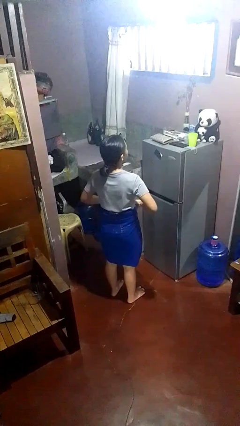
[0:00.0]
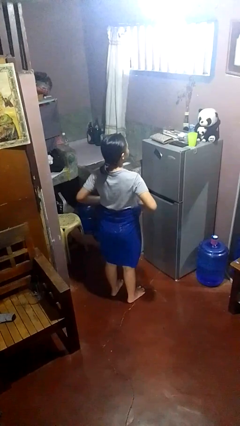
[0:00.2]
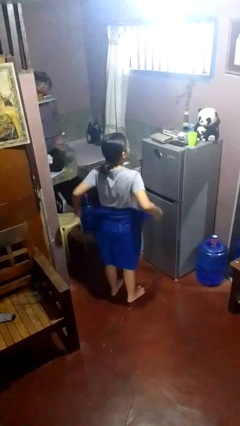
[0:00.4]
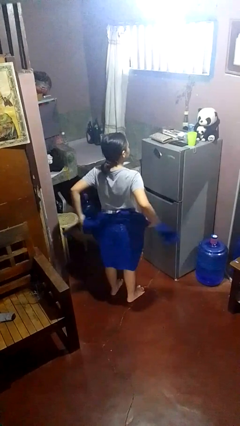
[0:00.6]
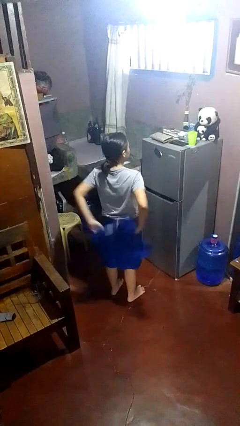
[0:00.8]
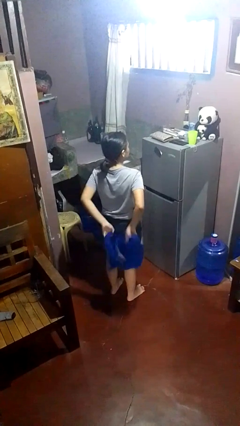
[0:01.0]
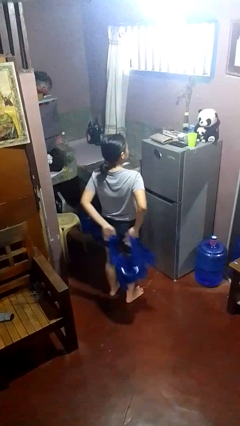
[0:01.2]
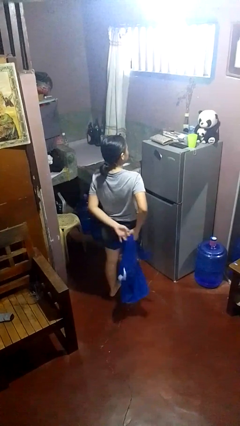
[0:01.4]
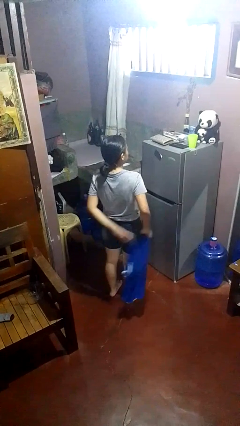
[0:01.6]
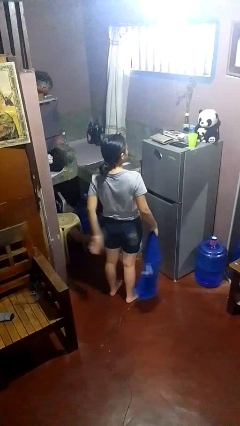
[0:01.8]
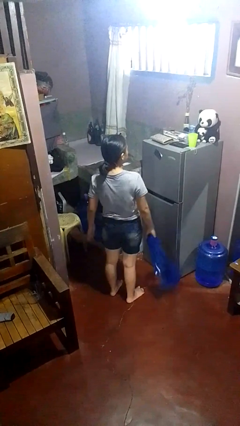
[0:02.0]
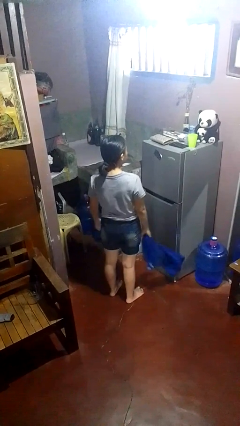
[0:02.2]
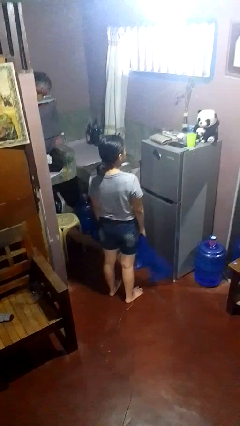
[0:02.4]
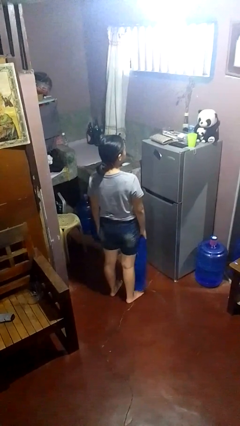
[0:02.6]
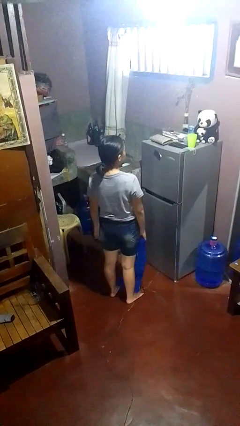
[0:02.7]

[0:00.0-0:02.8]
person unties jacket around waist

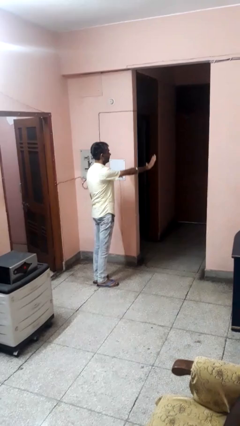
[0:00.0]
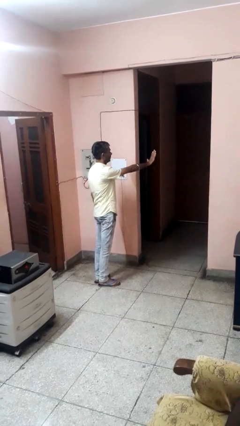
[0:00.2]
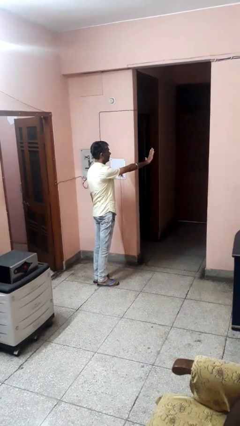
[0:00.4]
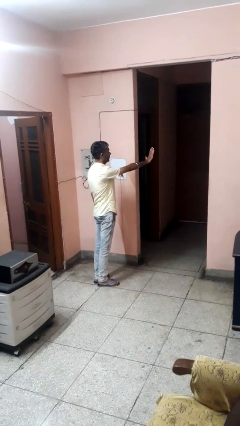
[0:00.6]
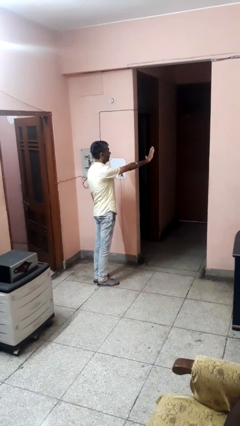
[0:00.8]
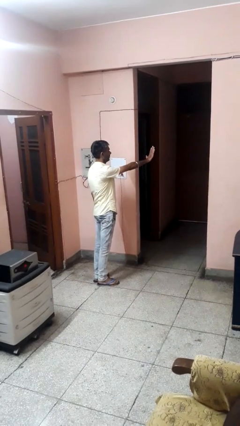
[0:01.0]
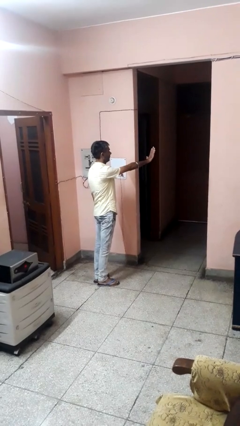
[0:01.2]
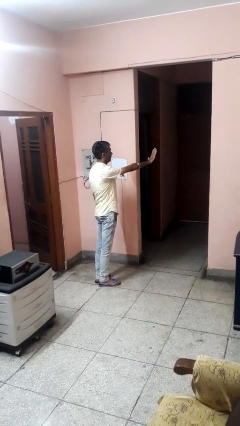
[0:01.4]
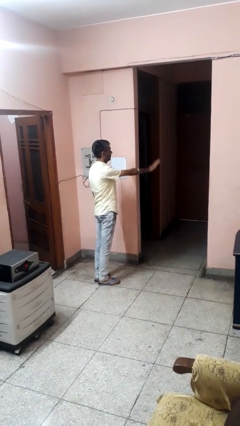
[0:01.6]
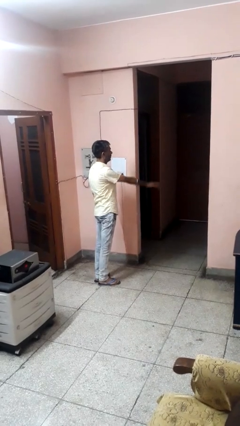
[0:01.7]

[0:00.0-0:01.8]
person gestures stop

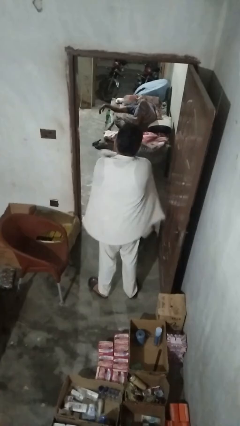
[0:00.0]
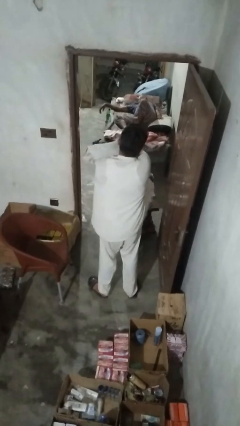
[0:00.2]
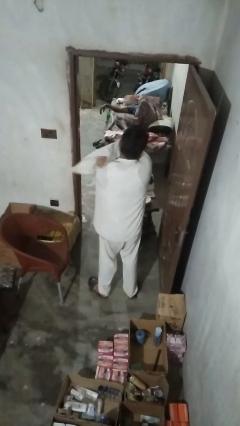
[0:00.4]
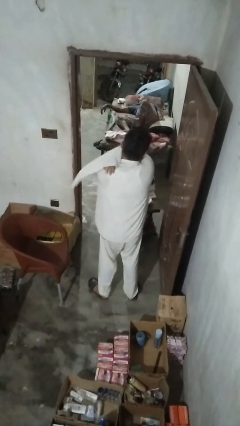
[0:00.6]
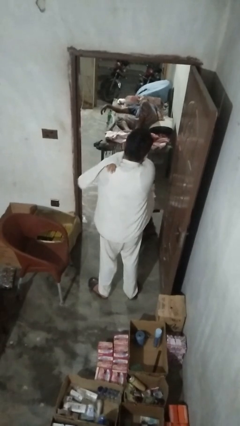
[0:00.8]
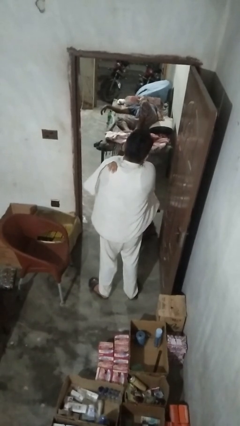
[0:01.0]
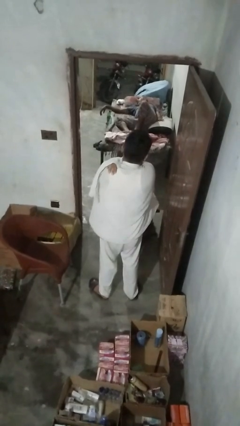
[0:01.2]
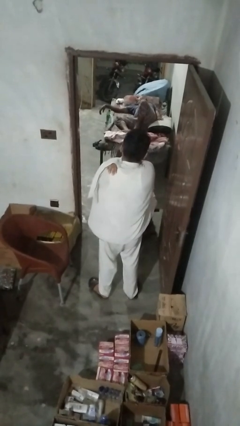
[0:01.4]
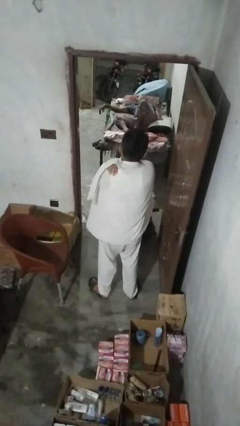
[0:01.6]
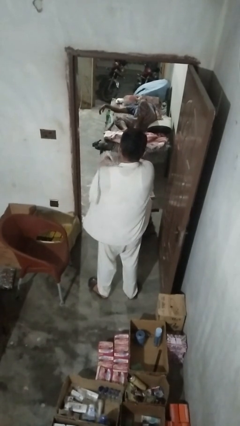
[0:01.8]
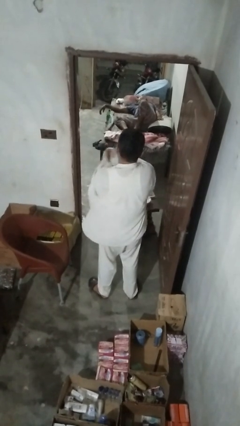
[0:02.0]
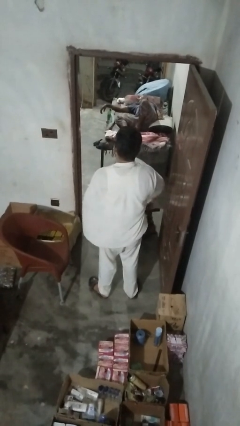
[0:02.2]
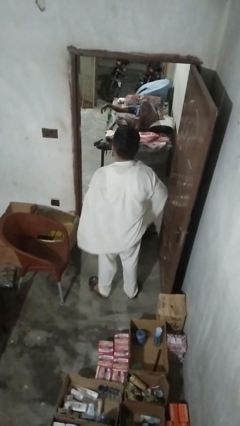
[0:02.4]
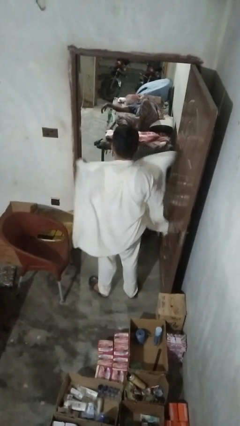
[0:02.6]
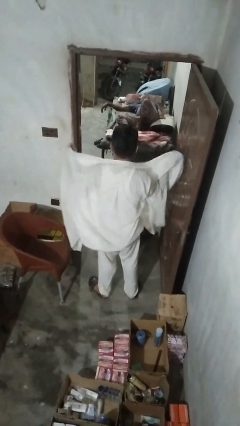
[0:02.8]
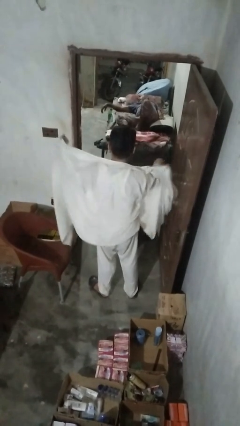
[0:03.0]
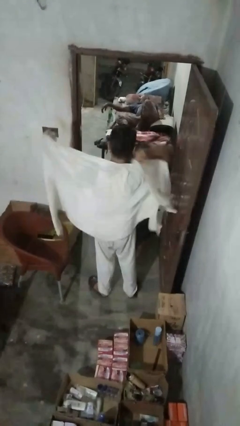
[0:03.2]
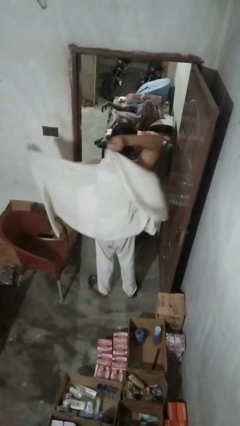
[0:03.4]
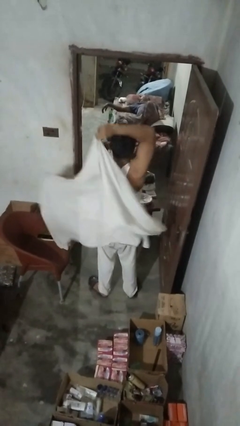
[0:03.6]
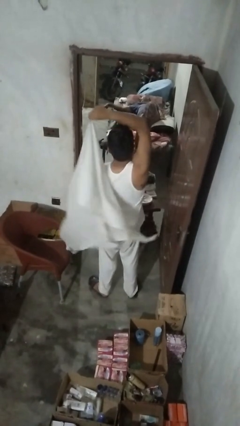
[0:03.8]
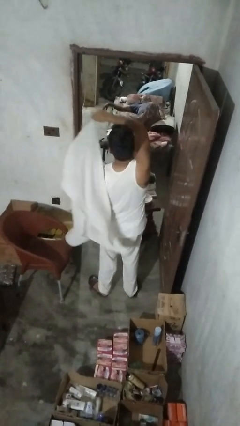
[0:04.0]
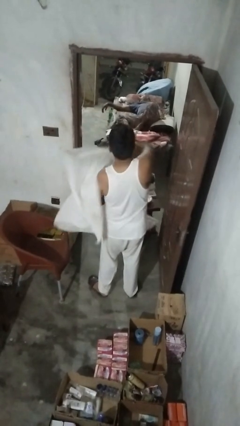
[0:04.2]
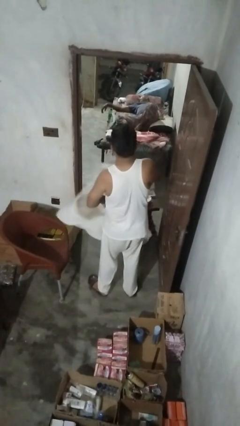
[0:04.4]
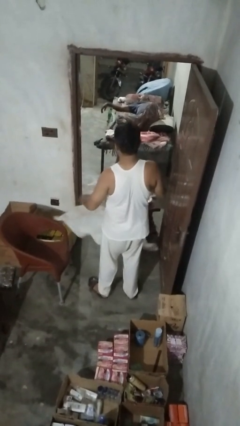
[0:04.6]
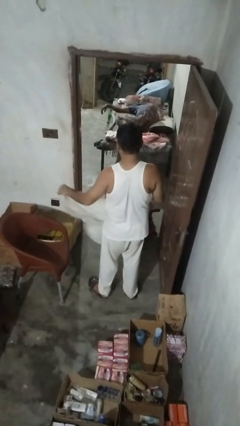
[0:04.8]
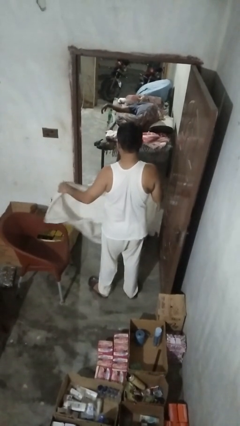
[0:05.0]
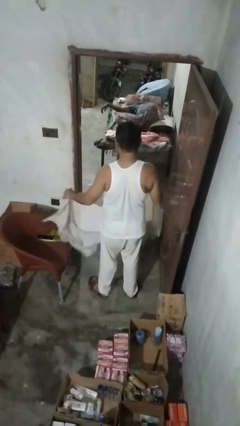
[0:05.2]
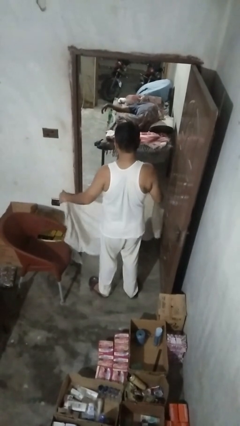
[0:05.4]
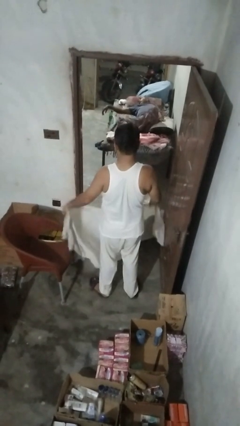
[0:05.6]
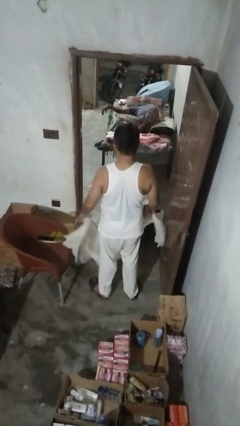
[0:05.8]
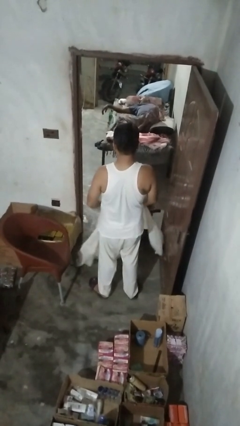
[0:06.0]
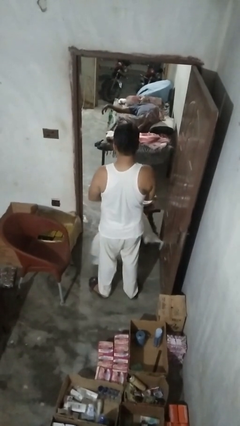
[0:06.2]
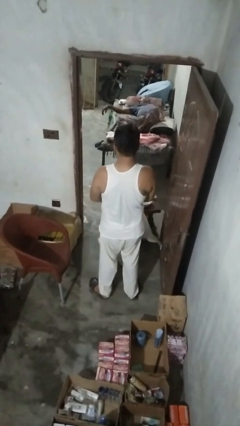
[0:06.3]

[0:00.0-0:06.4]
person unfolds blanket

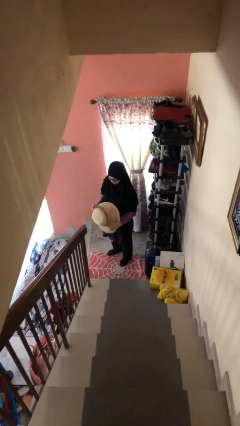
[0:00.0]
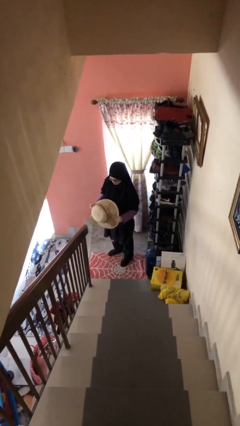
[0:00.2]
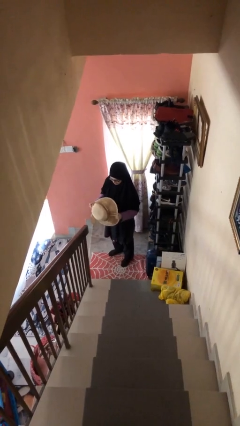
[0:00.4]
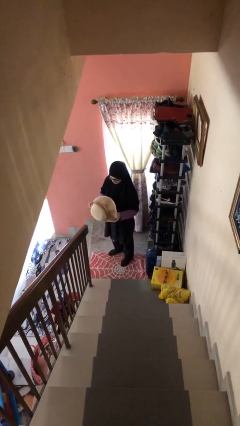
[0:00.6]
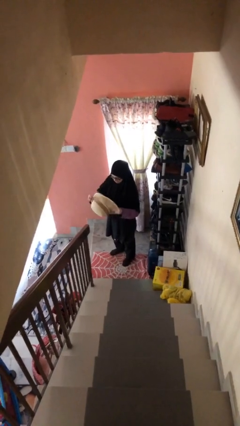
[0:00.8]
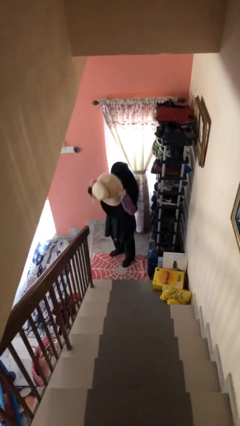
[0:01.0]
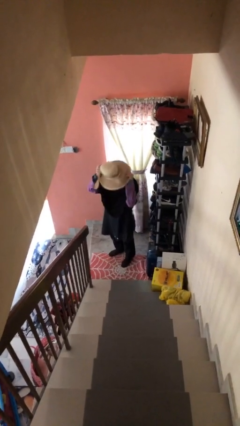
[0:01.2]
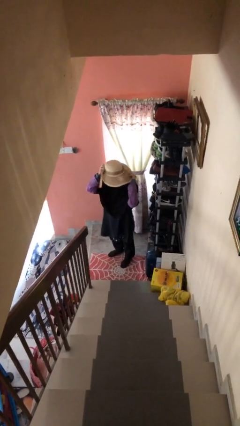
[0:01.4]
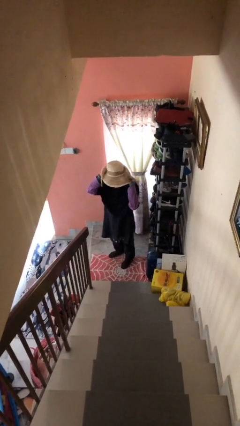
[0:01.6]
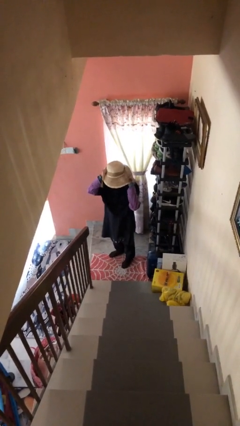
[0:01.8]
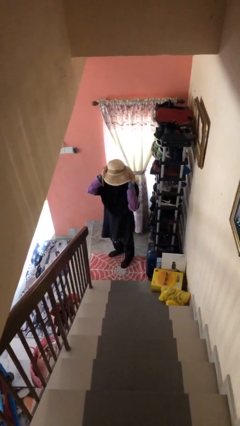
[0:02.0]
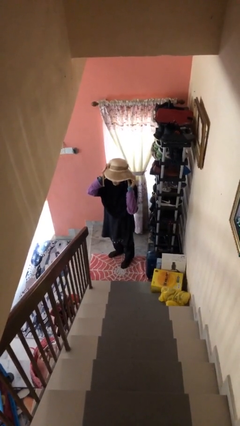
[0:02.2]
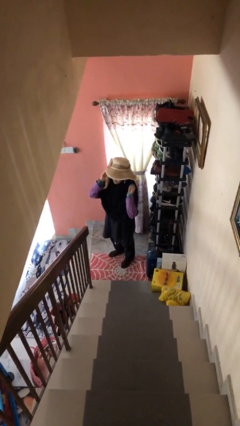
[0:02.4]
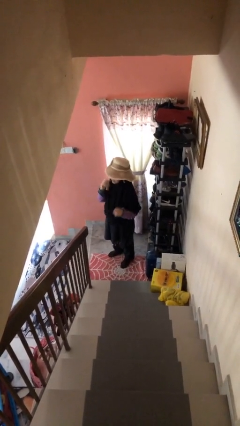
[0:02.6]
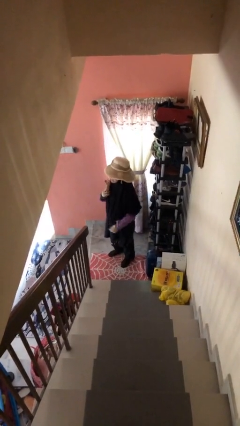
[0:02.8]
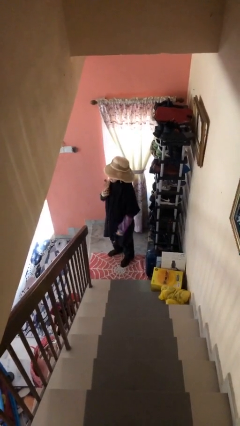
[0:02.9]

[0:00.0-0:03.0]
person puts on hat

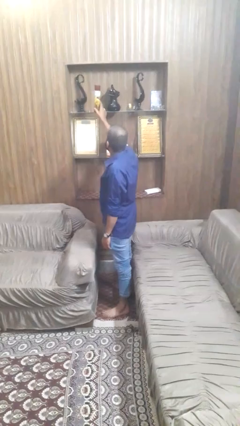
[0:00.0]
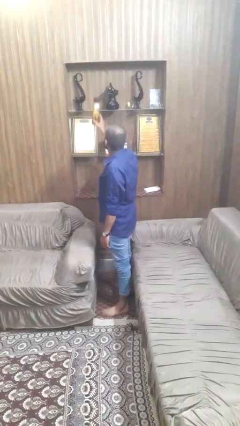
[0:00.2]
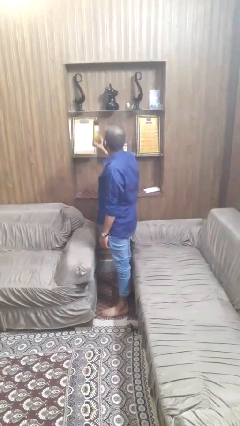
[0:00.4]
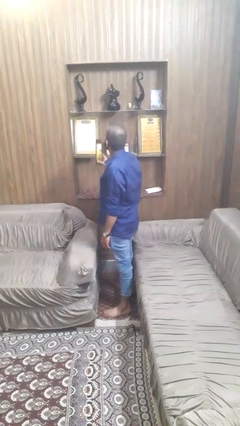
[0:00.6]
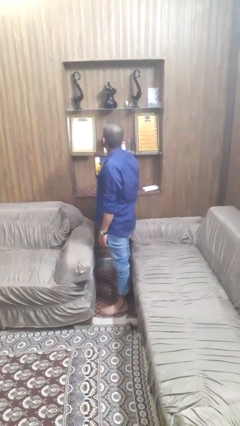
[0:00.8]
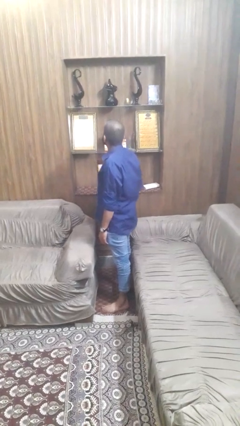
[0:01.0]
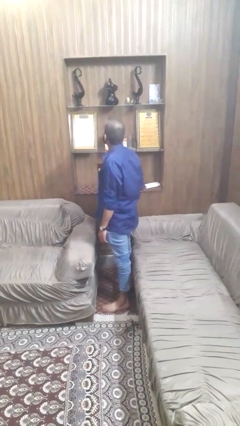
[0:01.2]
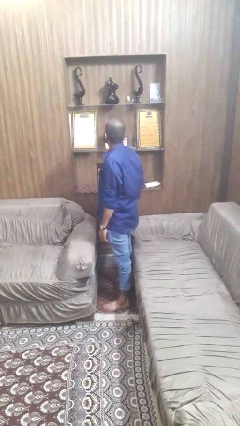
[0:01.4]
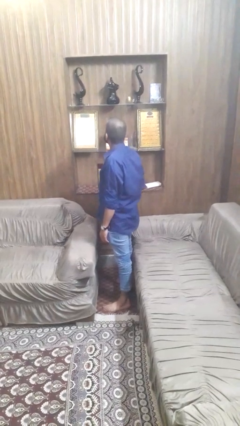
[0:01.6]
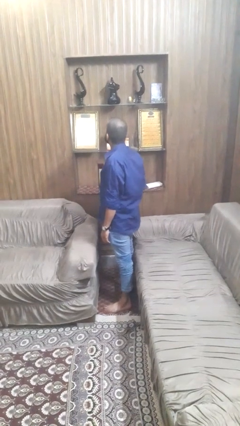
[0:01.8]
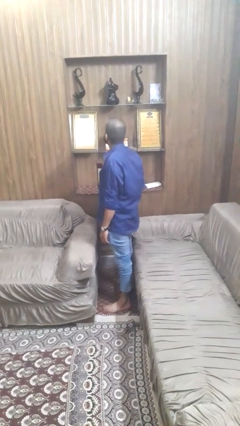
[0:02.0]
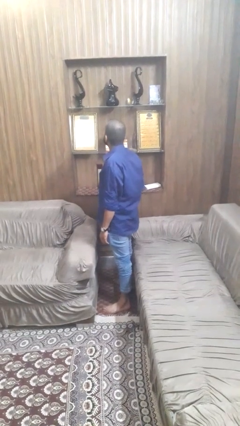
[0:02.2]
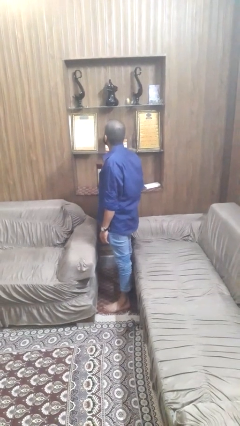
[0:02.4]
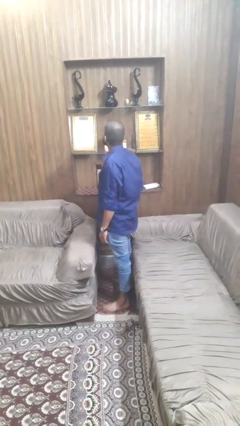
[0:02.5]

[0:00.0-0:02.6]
person picks up object from shelf

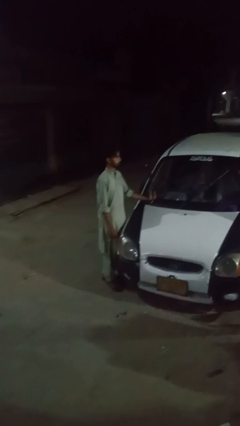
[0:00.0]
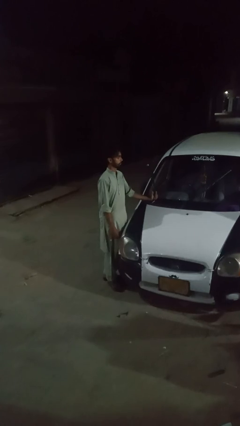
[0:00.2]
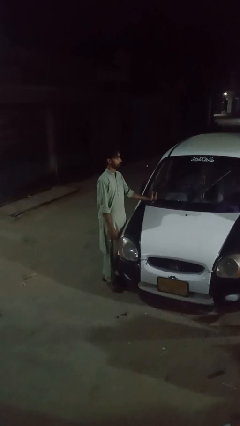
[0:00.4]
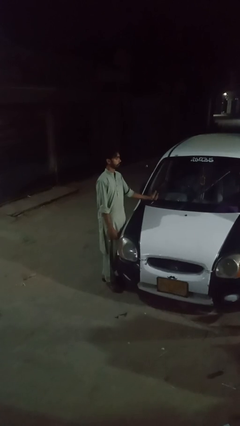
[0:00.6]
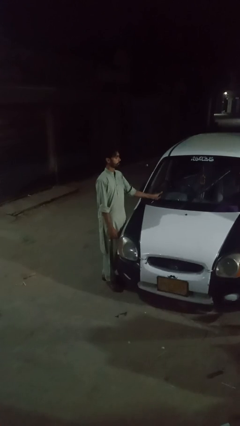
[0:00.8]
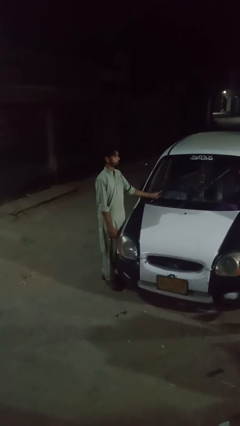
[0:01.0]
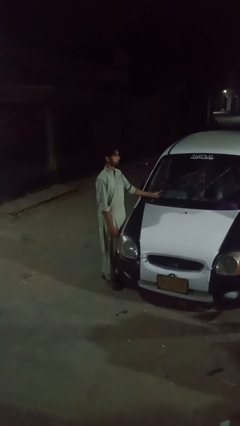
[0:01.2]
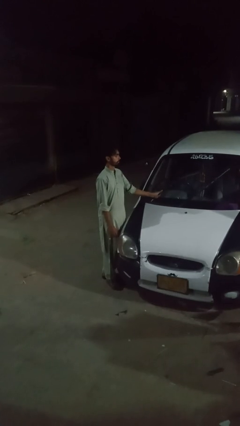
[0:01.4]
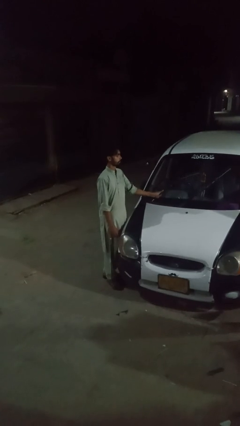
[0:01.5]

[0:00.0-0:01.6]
person flips down car wipers
